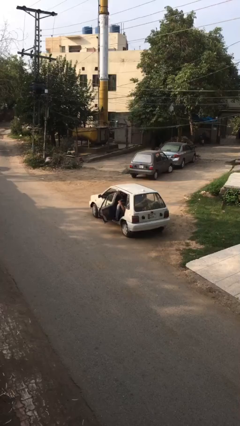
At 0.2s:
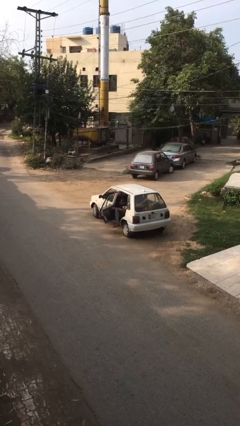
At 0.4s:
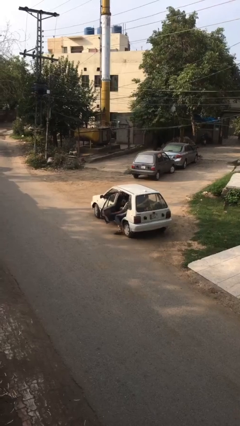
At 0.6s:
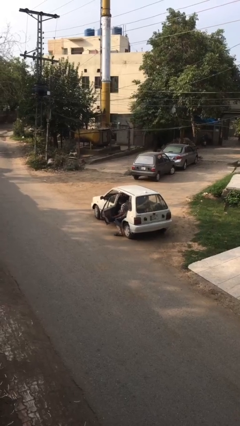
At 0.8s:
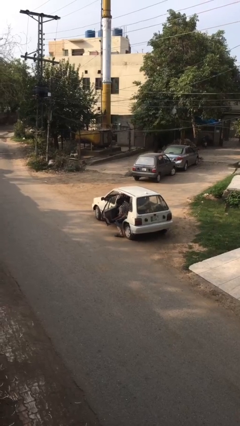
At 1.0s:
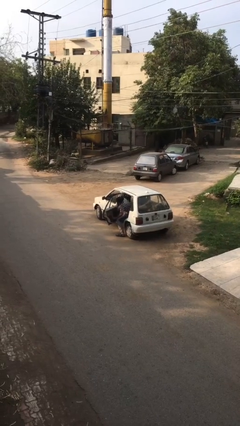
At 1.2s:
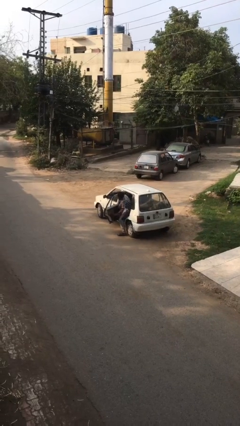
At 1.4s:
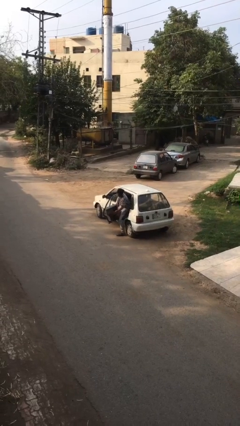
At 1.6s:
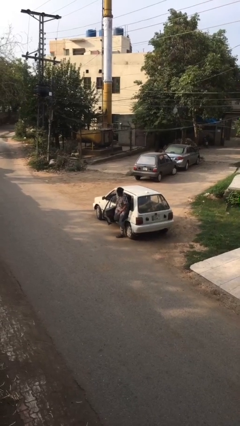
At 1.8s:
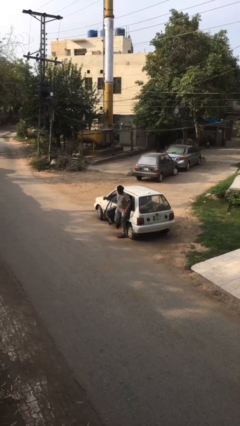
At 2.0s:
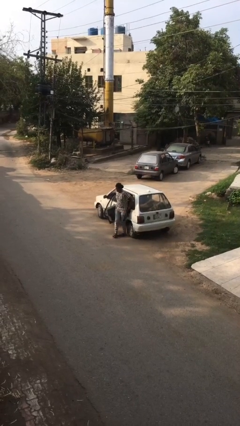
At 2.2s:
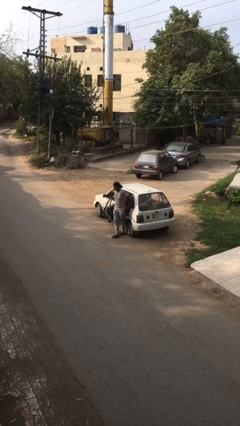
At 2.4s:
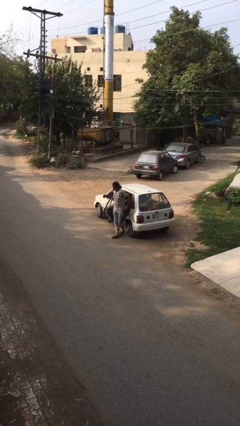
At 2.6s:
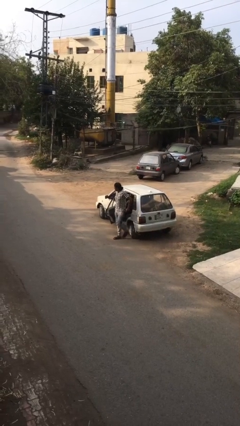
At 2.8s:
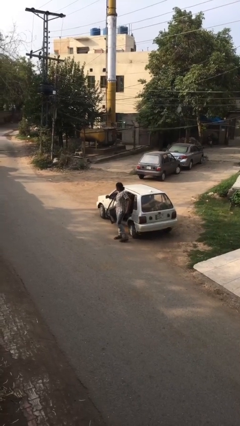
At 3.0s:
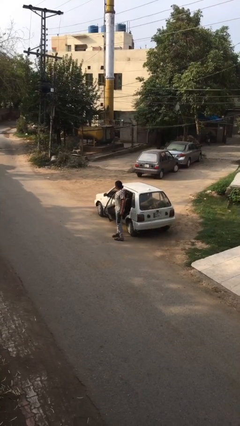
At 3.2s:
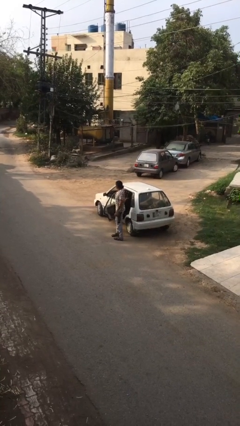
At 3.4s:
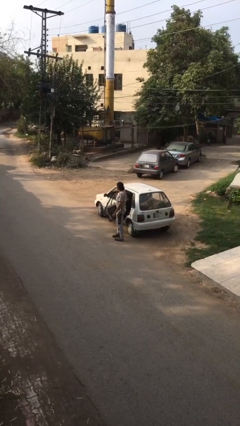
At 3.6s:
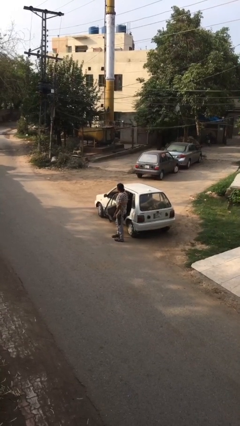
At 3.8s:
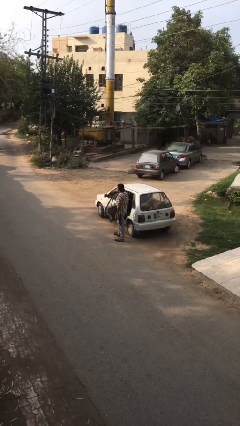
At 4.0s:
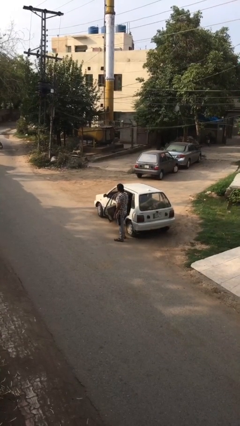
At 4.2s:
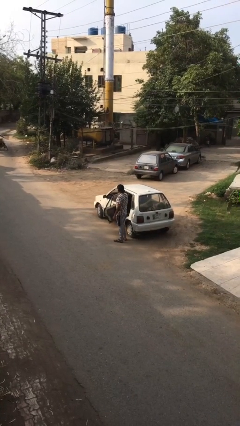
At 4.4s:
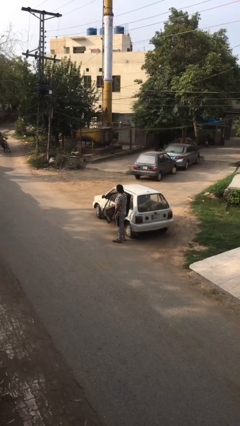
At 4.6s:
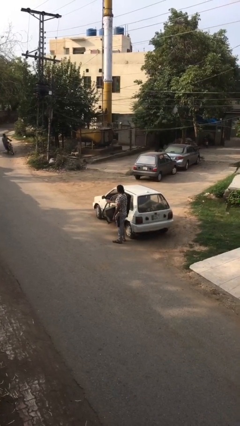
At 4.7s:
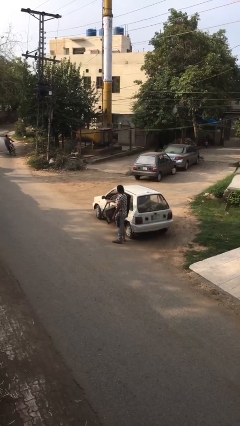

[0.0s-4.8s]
person exits car

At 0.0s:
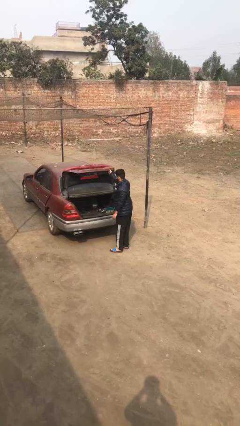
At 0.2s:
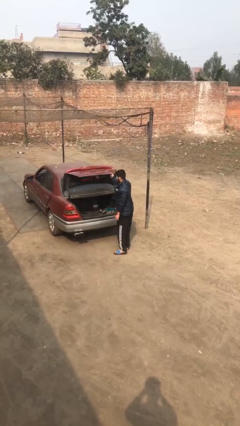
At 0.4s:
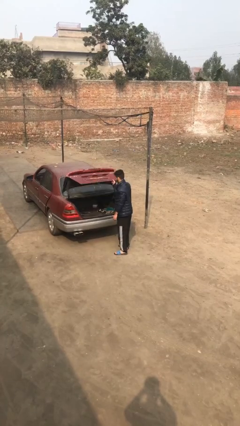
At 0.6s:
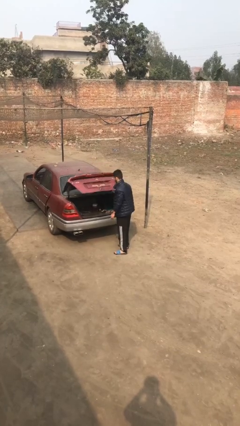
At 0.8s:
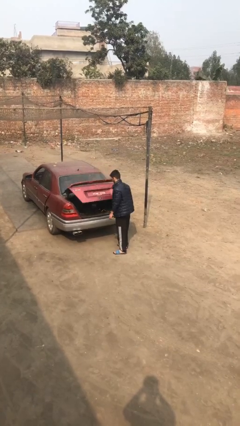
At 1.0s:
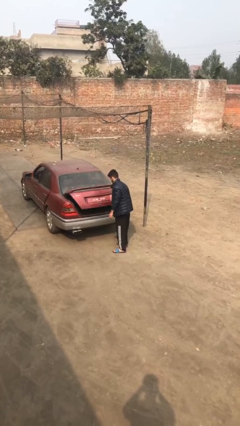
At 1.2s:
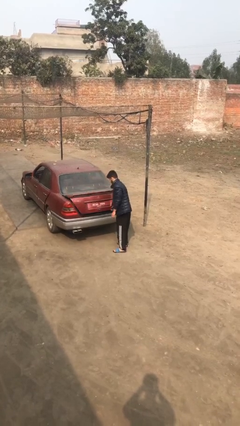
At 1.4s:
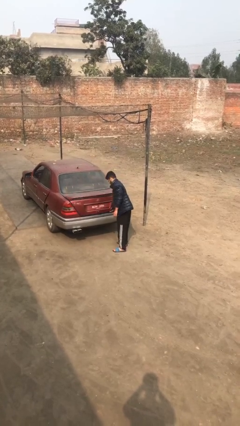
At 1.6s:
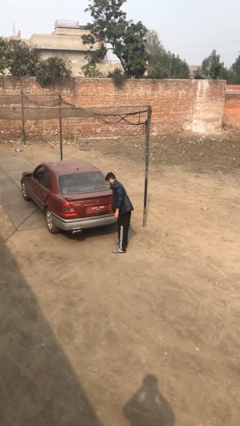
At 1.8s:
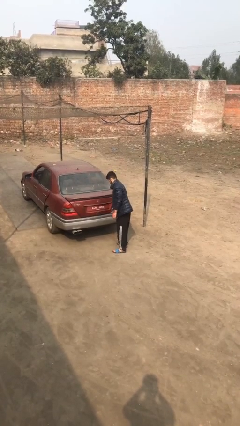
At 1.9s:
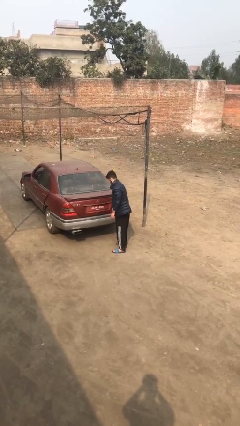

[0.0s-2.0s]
person closes car trunk

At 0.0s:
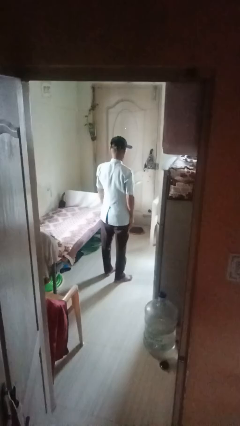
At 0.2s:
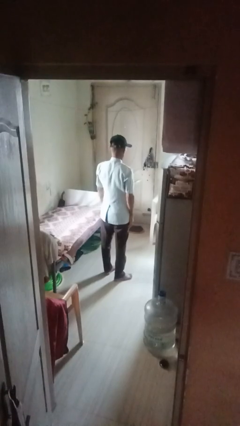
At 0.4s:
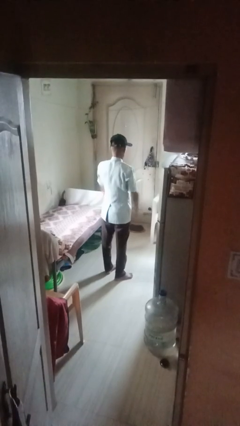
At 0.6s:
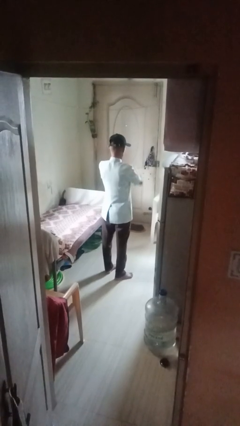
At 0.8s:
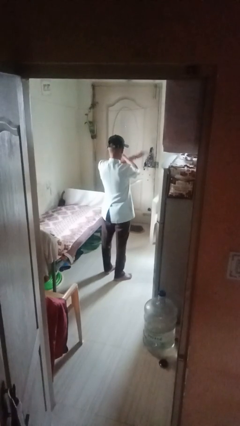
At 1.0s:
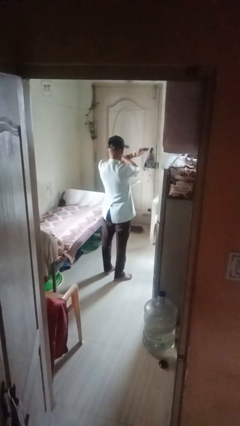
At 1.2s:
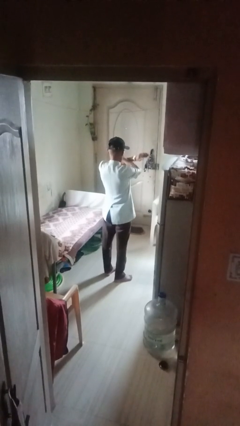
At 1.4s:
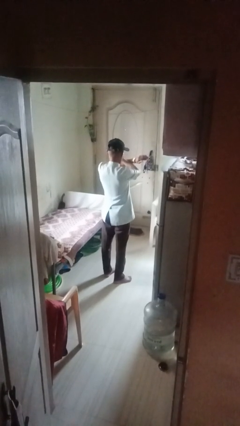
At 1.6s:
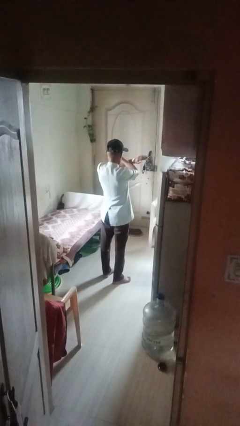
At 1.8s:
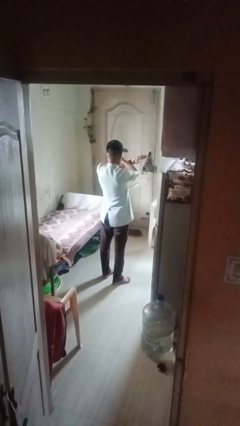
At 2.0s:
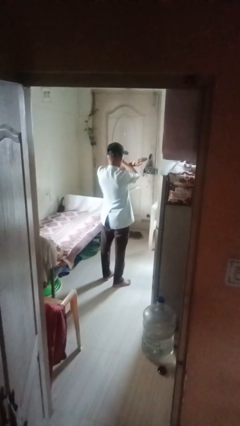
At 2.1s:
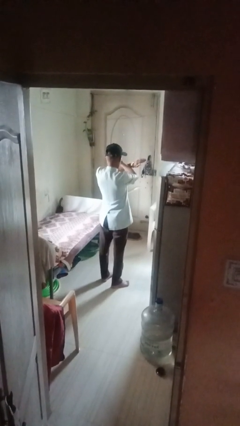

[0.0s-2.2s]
person gestures arms x

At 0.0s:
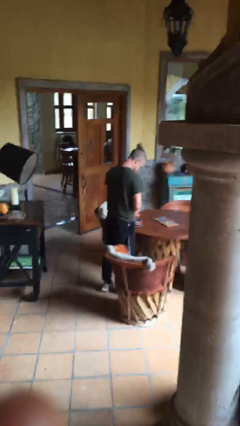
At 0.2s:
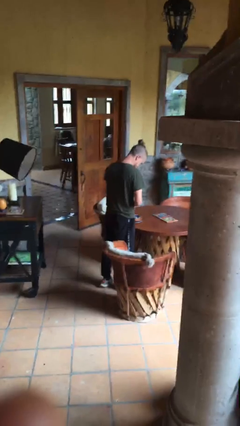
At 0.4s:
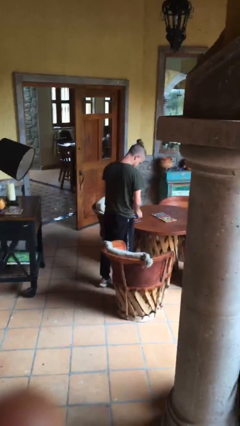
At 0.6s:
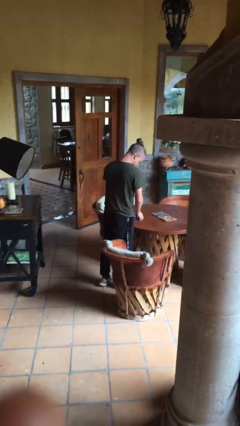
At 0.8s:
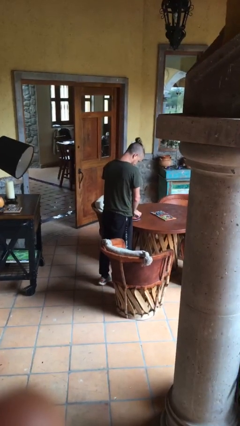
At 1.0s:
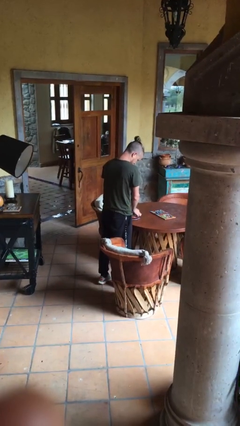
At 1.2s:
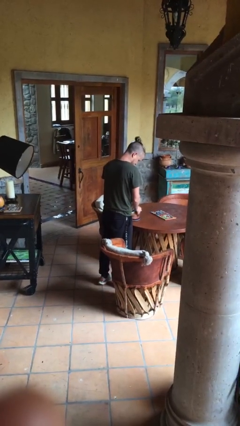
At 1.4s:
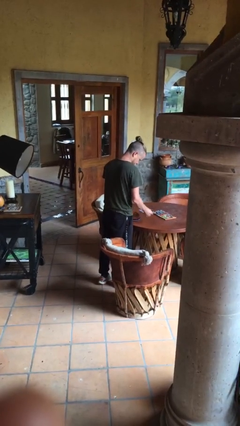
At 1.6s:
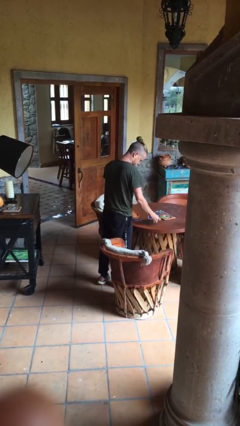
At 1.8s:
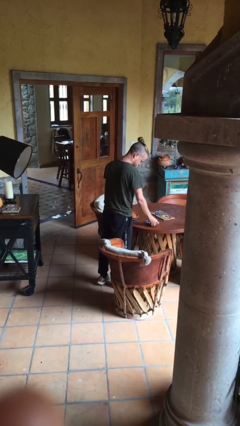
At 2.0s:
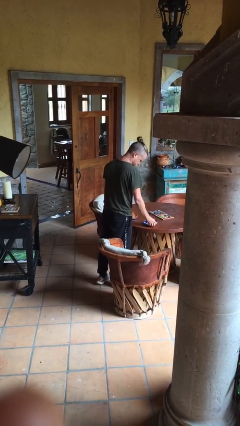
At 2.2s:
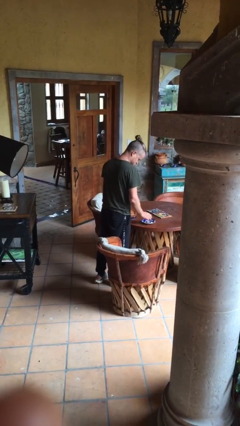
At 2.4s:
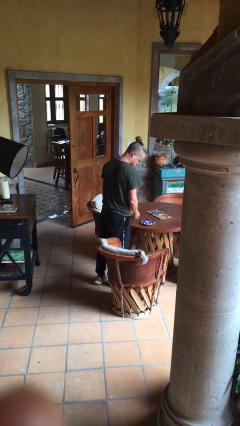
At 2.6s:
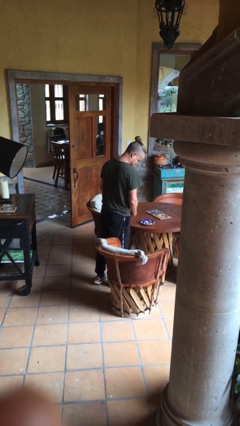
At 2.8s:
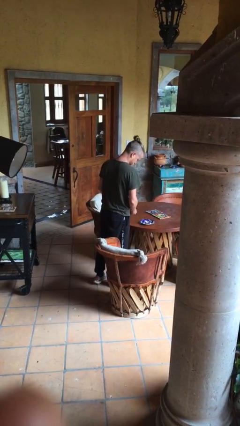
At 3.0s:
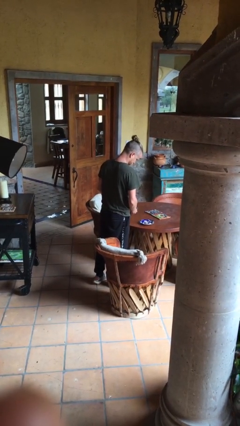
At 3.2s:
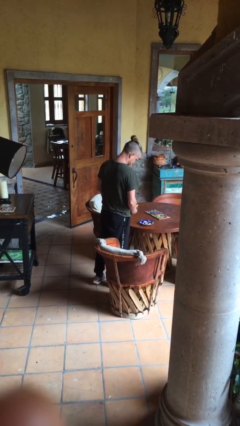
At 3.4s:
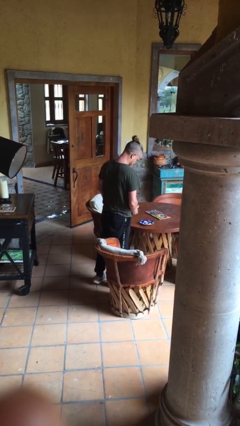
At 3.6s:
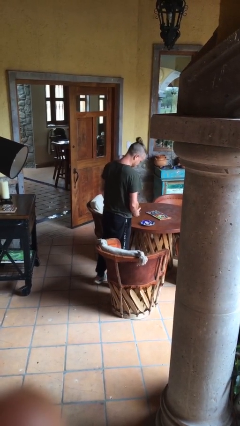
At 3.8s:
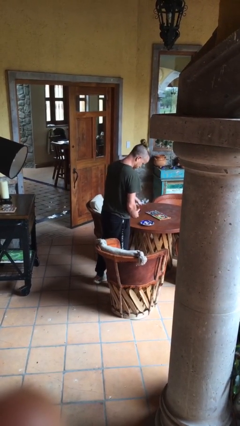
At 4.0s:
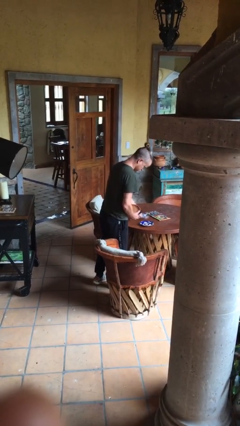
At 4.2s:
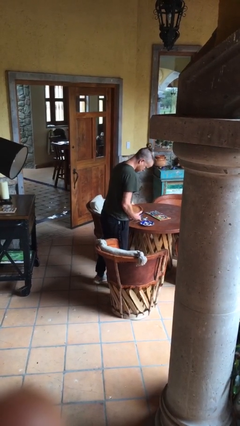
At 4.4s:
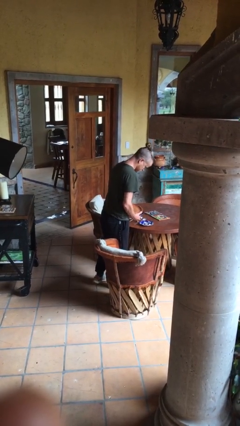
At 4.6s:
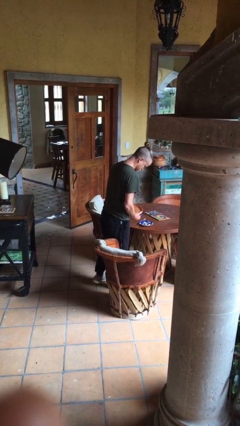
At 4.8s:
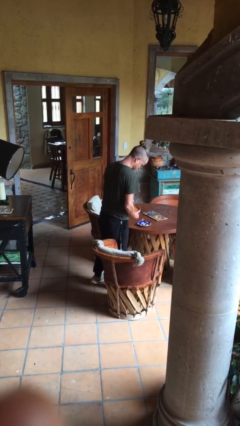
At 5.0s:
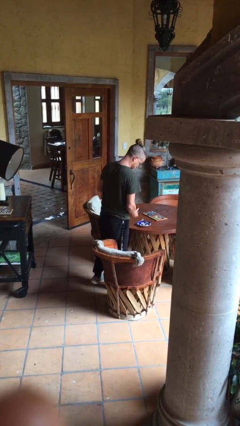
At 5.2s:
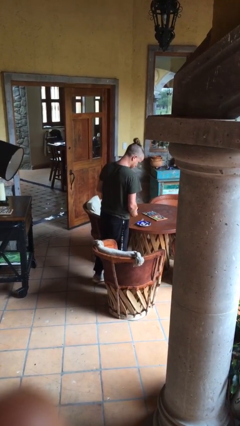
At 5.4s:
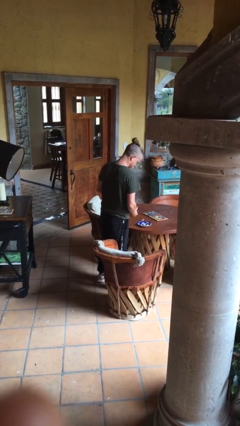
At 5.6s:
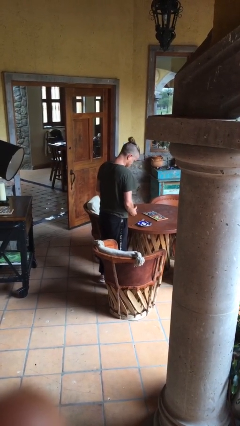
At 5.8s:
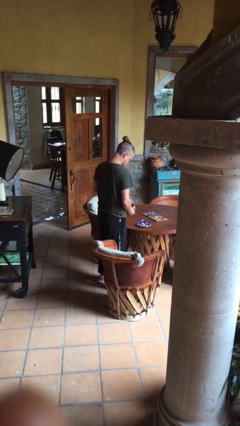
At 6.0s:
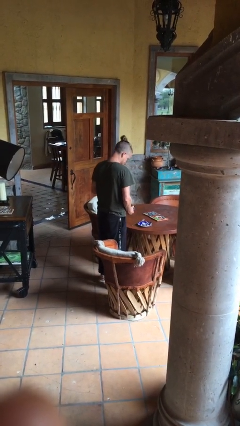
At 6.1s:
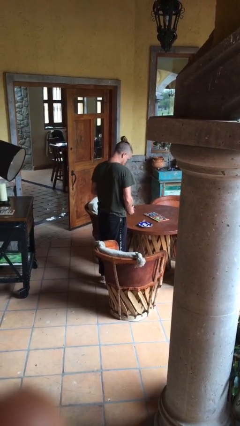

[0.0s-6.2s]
person sets table

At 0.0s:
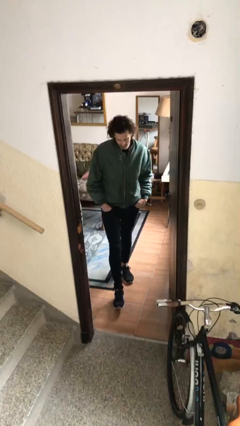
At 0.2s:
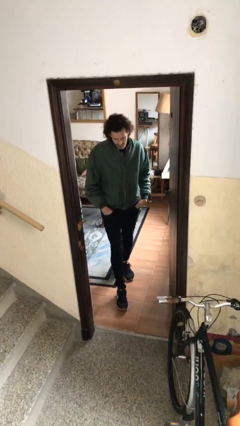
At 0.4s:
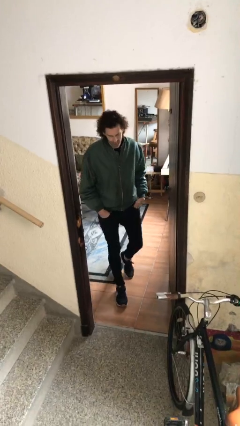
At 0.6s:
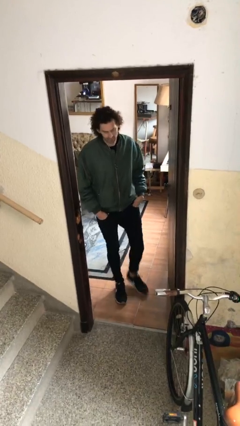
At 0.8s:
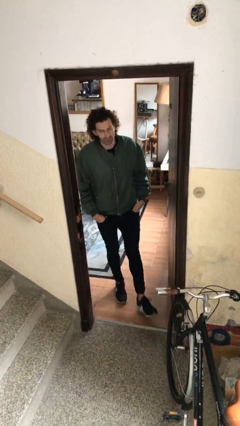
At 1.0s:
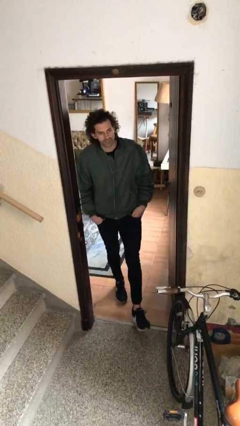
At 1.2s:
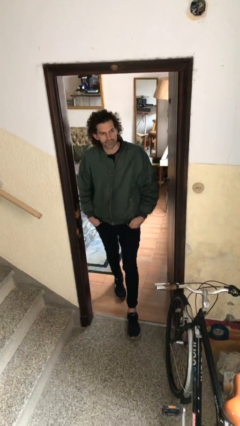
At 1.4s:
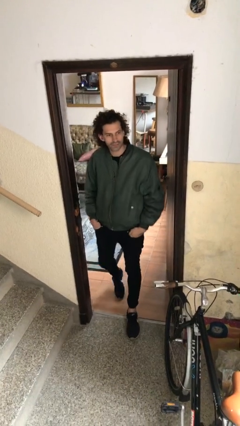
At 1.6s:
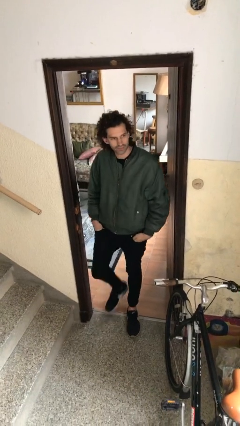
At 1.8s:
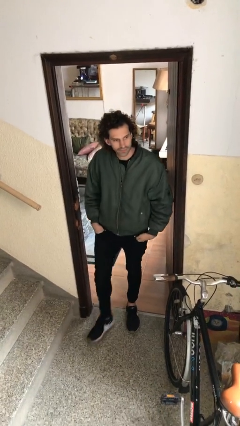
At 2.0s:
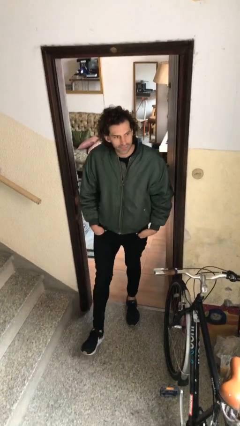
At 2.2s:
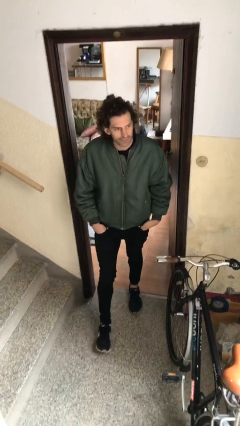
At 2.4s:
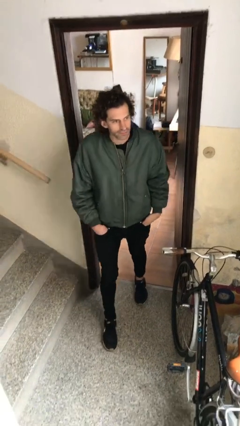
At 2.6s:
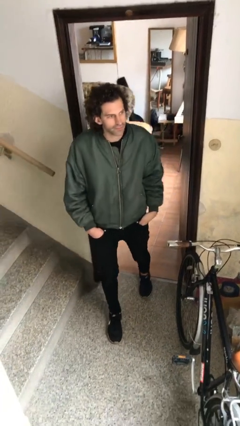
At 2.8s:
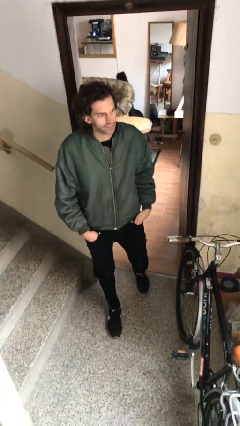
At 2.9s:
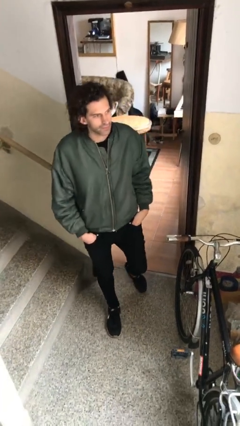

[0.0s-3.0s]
person enters scene through structure
